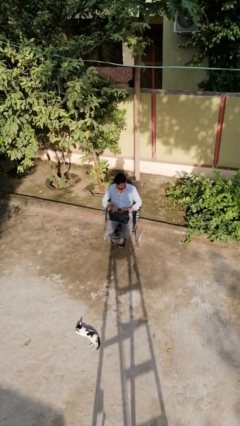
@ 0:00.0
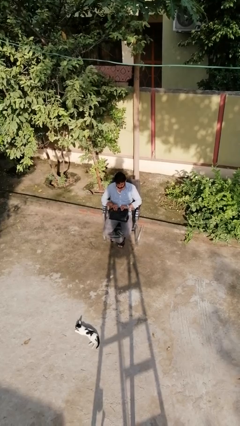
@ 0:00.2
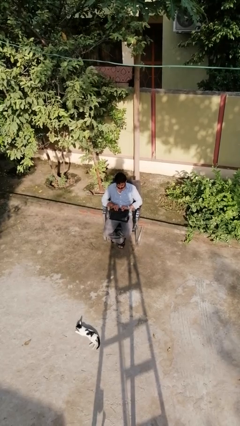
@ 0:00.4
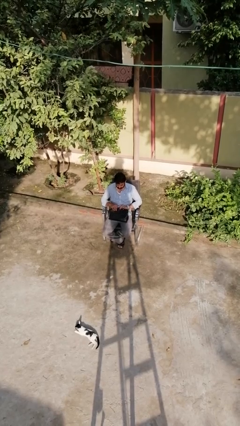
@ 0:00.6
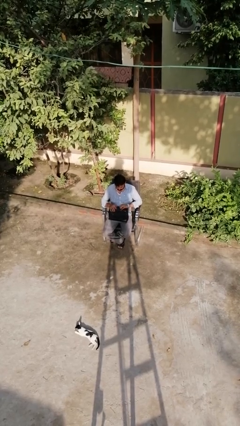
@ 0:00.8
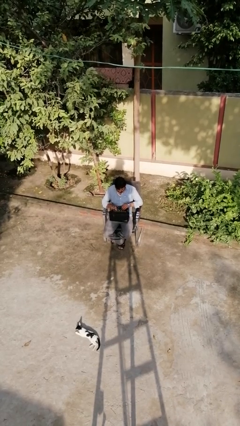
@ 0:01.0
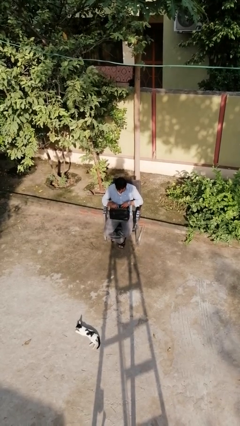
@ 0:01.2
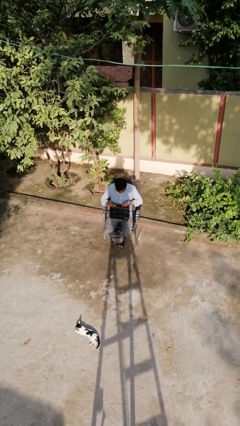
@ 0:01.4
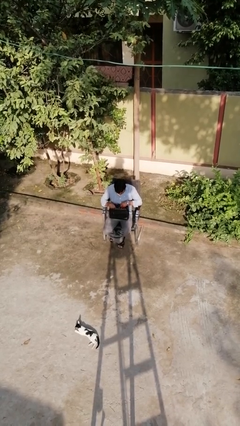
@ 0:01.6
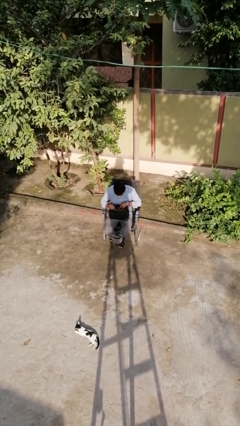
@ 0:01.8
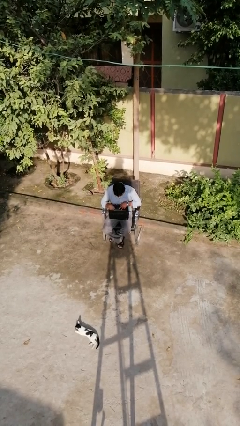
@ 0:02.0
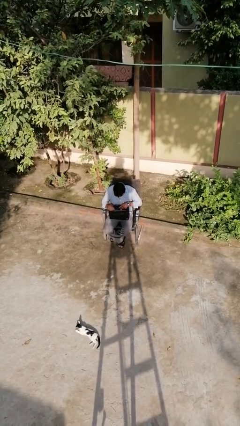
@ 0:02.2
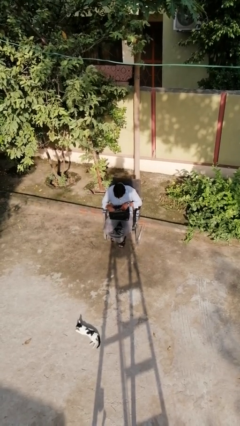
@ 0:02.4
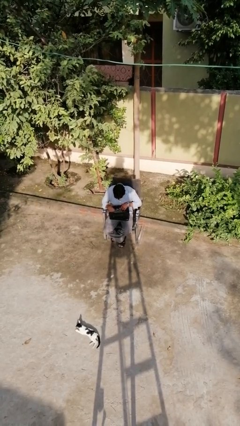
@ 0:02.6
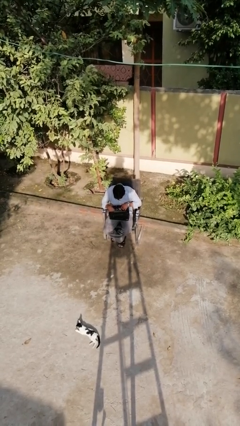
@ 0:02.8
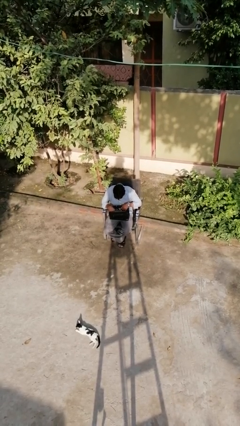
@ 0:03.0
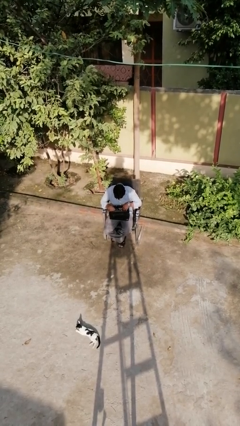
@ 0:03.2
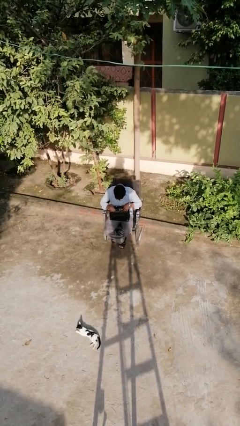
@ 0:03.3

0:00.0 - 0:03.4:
person searches in backpack

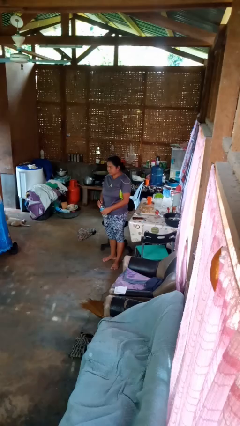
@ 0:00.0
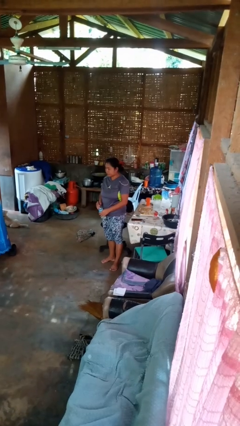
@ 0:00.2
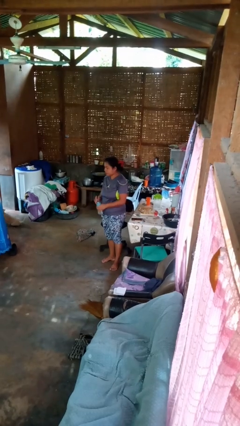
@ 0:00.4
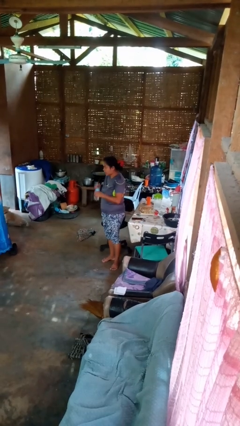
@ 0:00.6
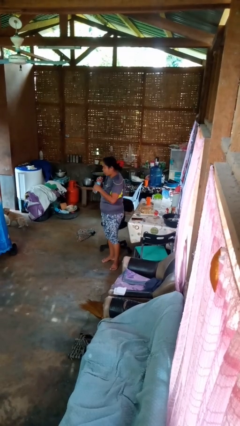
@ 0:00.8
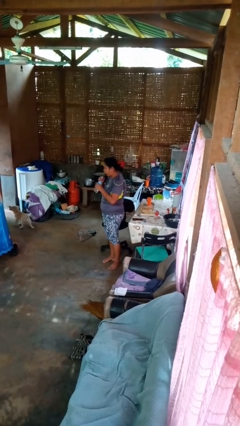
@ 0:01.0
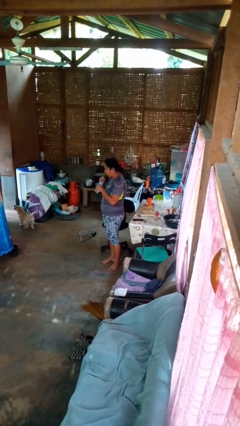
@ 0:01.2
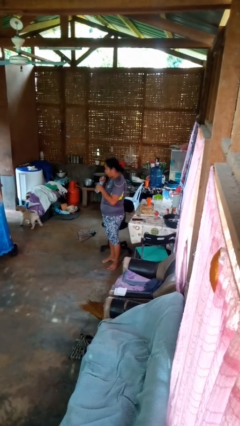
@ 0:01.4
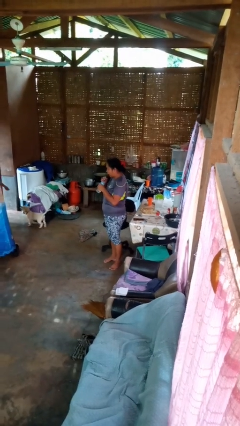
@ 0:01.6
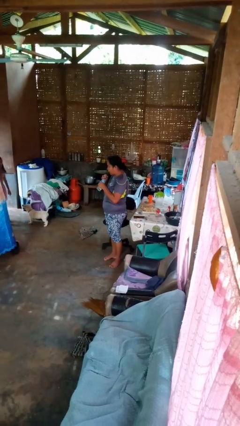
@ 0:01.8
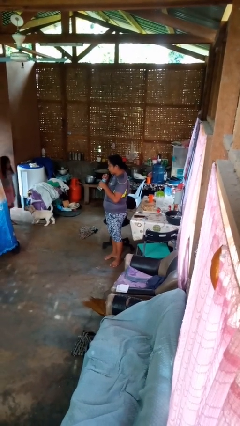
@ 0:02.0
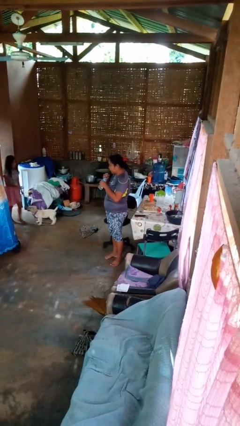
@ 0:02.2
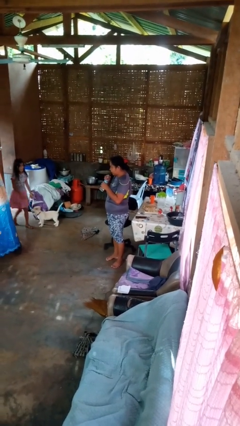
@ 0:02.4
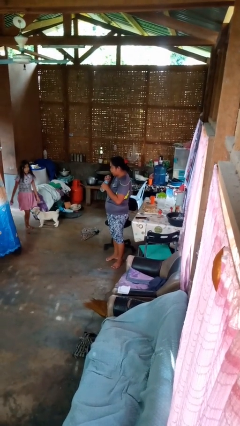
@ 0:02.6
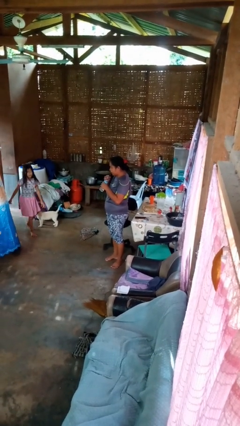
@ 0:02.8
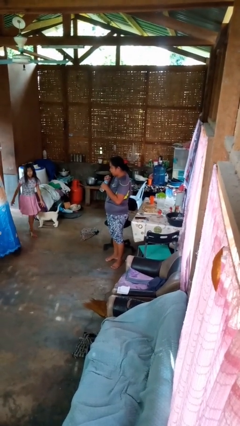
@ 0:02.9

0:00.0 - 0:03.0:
person drinks from straw

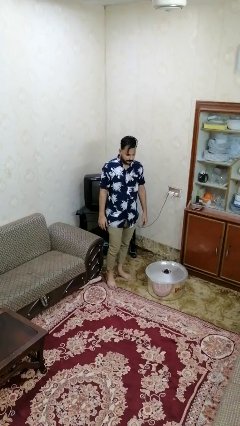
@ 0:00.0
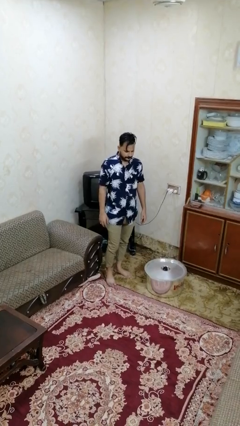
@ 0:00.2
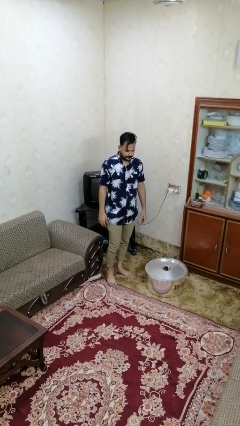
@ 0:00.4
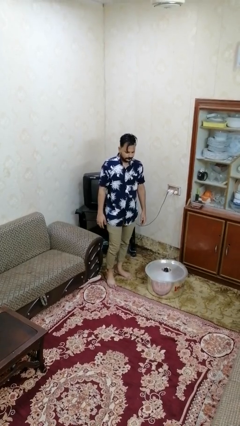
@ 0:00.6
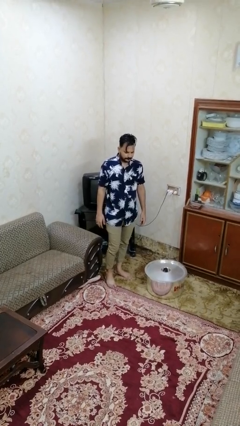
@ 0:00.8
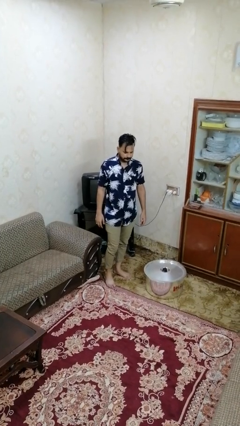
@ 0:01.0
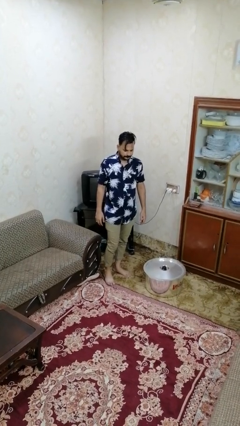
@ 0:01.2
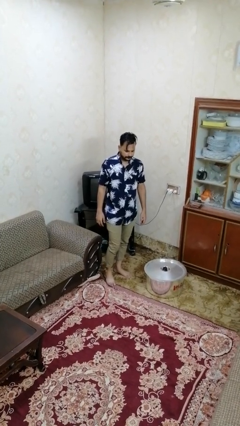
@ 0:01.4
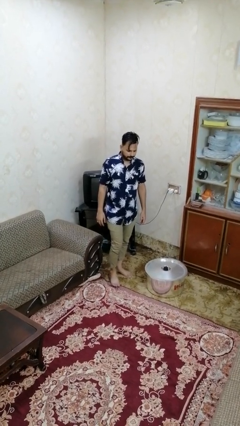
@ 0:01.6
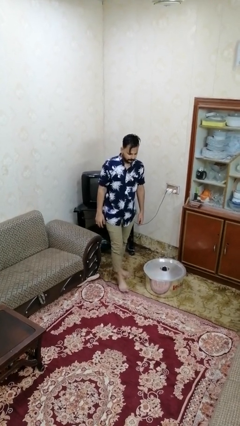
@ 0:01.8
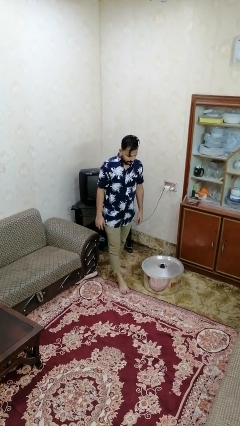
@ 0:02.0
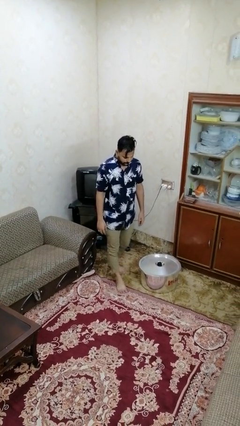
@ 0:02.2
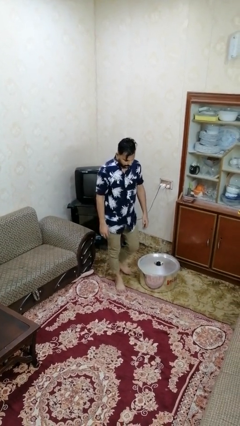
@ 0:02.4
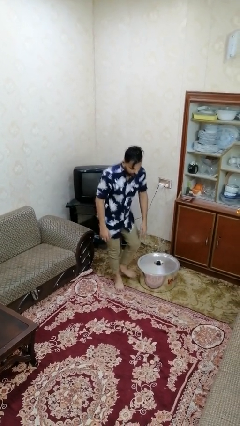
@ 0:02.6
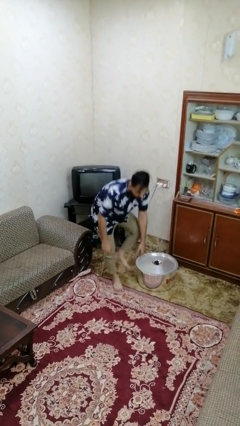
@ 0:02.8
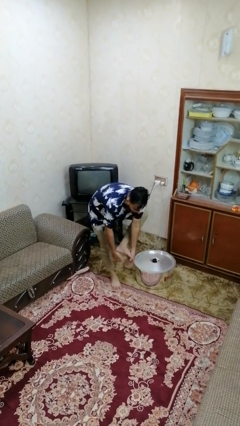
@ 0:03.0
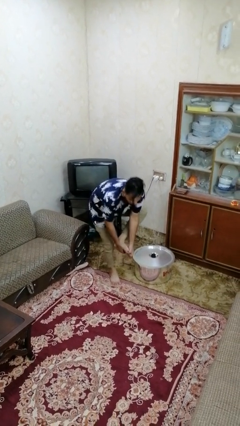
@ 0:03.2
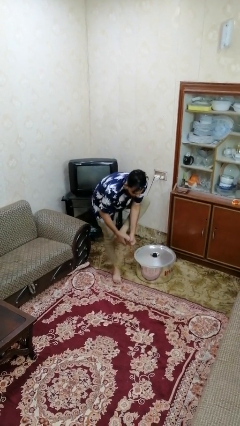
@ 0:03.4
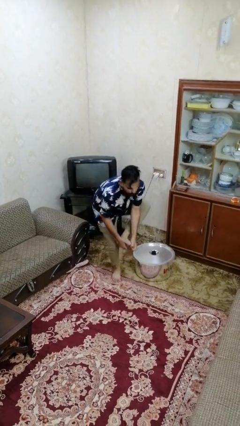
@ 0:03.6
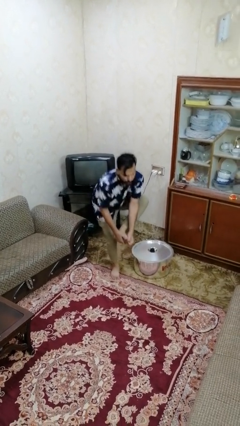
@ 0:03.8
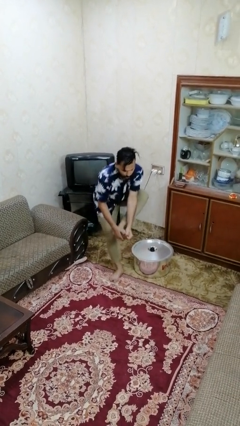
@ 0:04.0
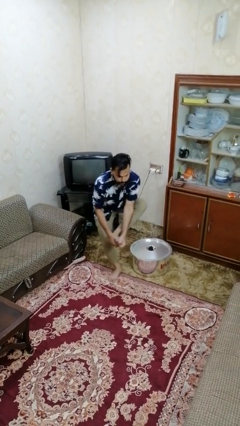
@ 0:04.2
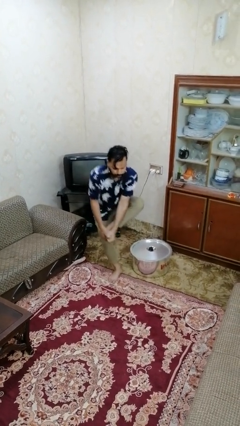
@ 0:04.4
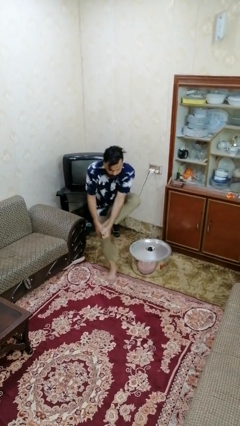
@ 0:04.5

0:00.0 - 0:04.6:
person trips on object on floor

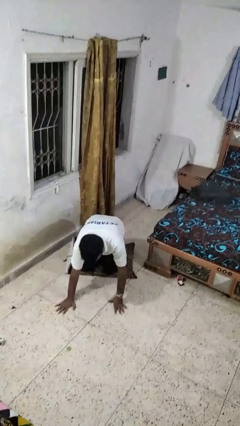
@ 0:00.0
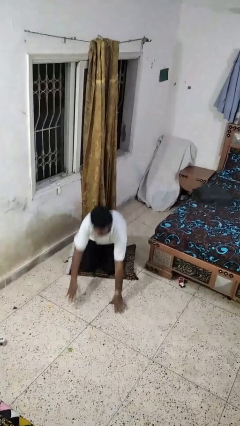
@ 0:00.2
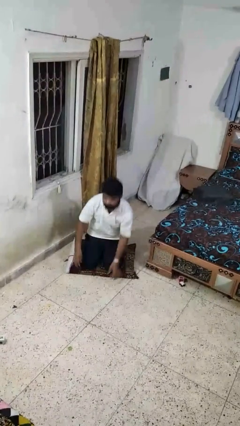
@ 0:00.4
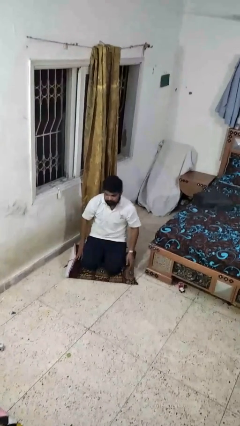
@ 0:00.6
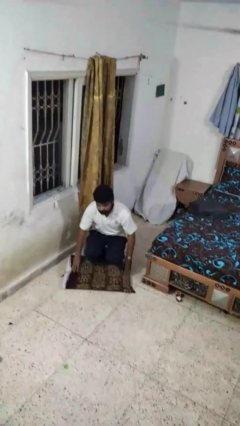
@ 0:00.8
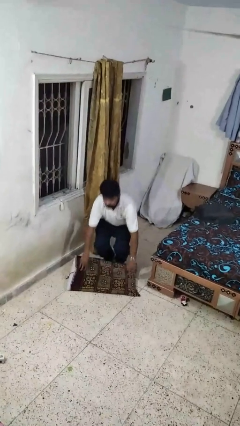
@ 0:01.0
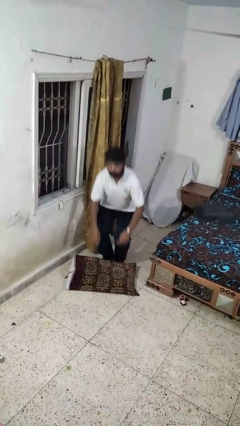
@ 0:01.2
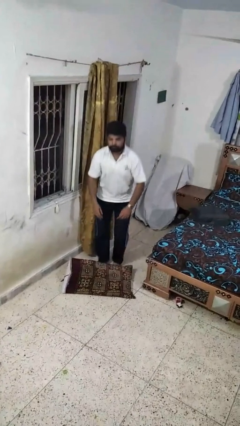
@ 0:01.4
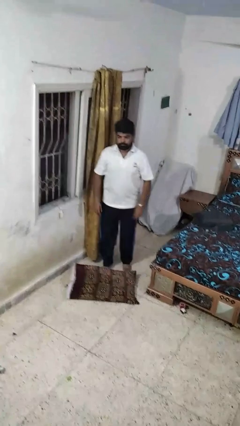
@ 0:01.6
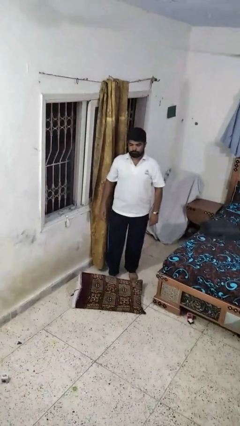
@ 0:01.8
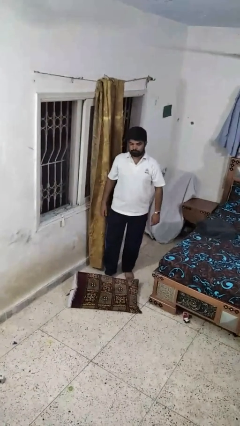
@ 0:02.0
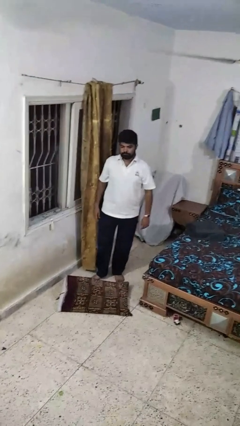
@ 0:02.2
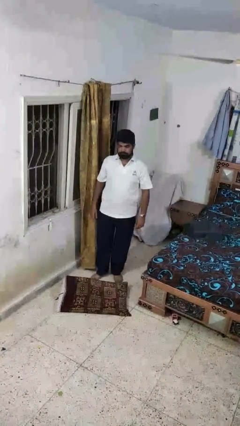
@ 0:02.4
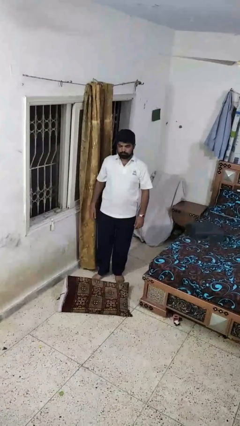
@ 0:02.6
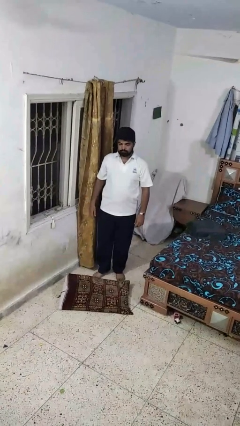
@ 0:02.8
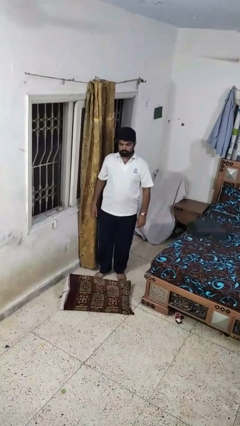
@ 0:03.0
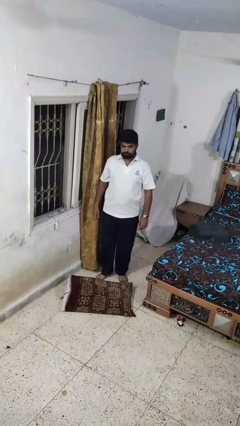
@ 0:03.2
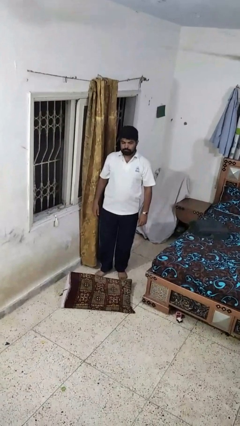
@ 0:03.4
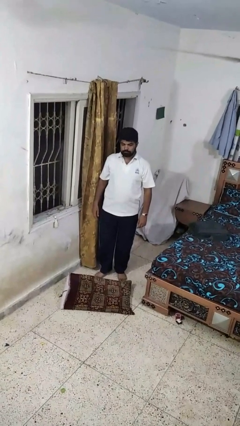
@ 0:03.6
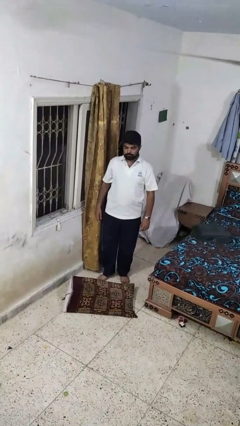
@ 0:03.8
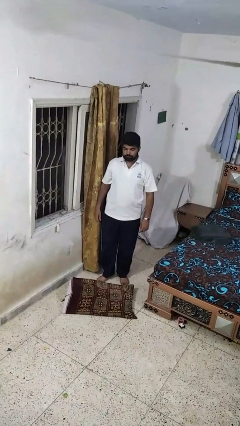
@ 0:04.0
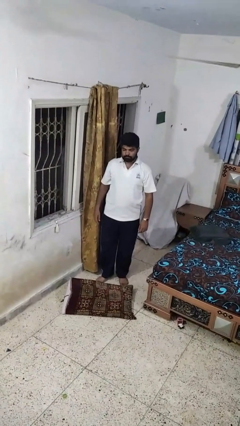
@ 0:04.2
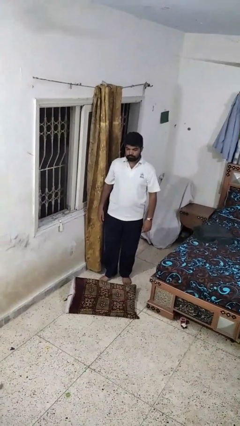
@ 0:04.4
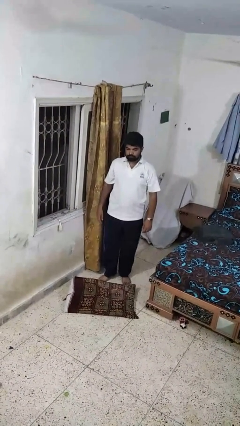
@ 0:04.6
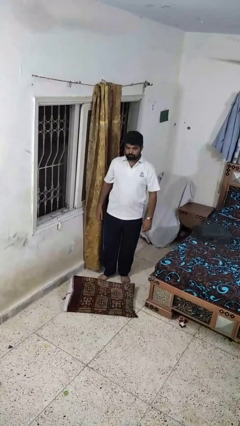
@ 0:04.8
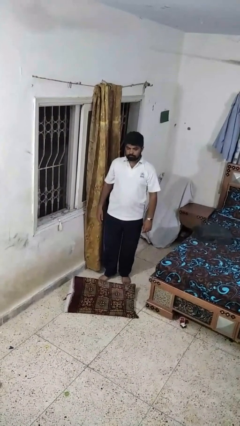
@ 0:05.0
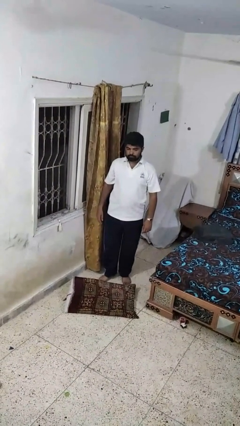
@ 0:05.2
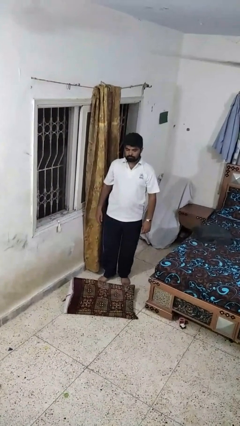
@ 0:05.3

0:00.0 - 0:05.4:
person stands up from floor

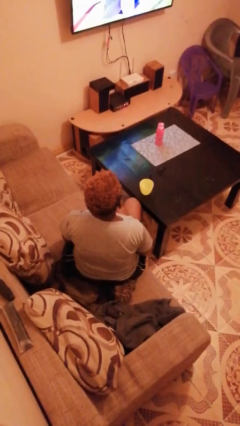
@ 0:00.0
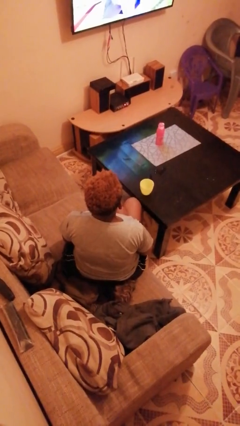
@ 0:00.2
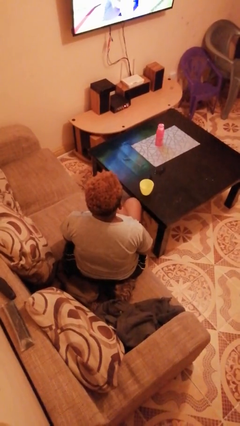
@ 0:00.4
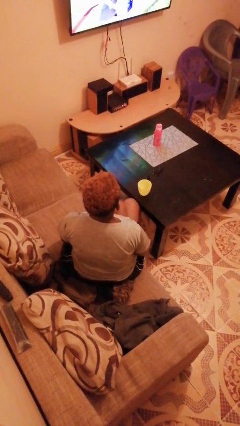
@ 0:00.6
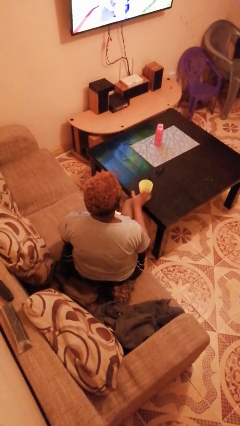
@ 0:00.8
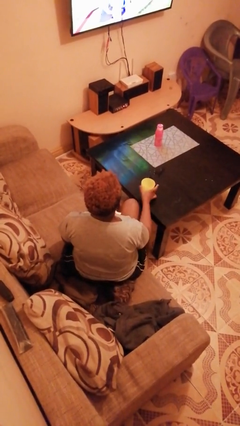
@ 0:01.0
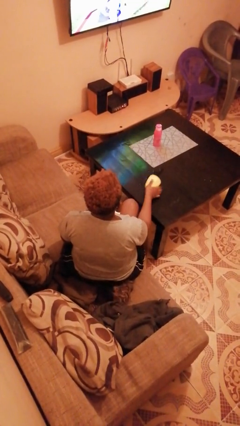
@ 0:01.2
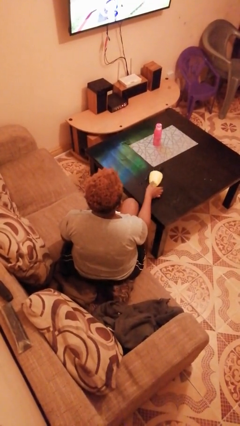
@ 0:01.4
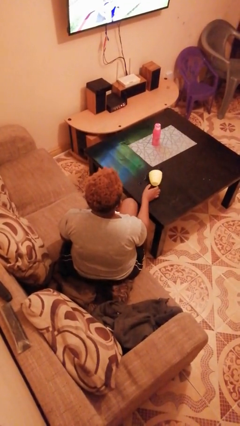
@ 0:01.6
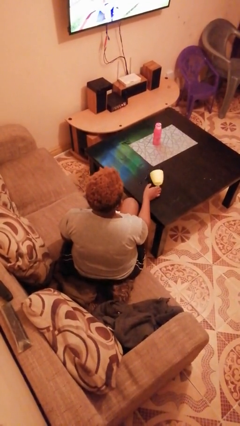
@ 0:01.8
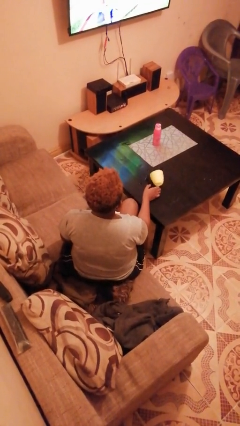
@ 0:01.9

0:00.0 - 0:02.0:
person spills on table
